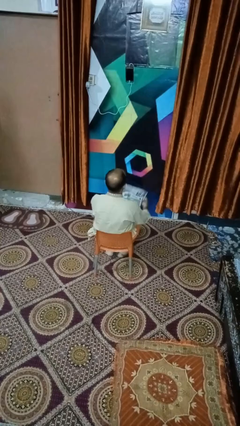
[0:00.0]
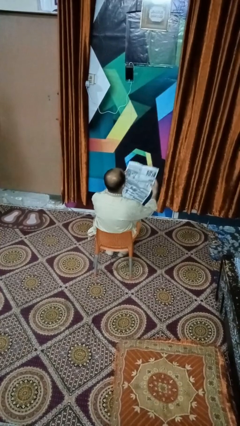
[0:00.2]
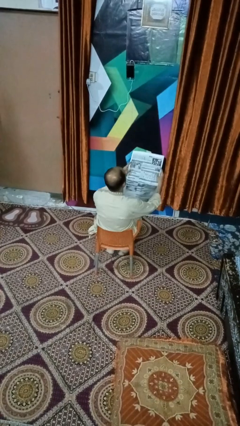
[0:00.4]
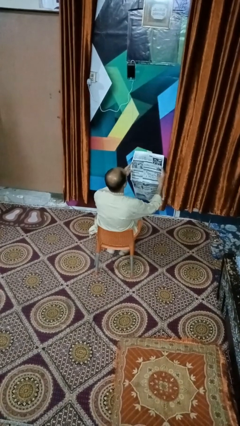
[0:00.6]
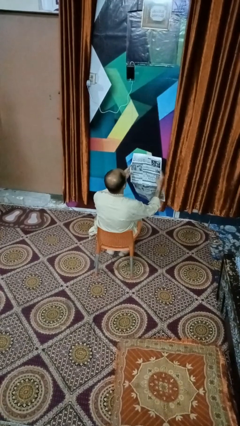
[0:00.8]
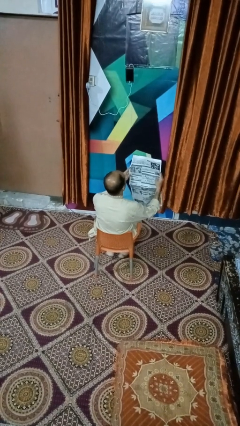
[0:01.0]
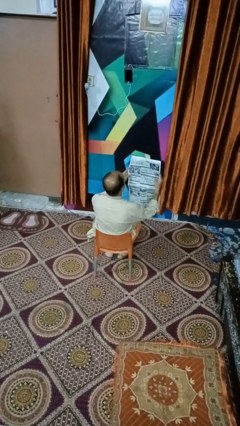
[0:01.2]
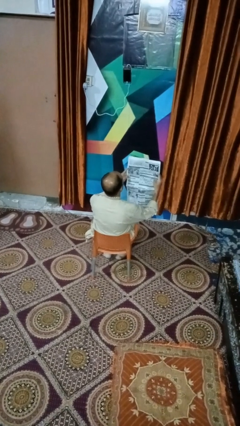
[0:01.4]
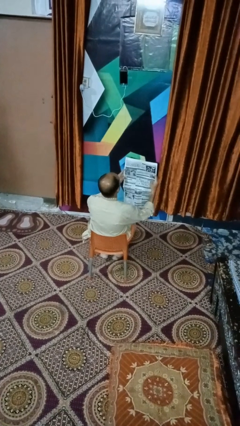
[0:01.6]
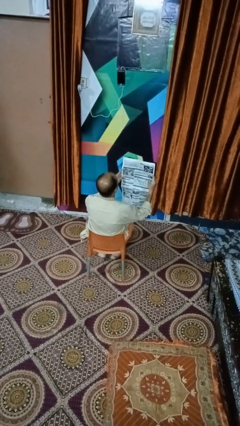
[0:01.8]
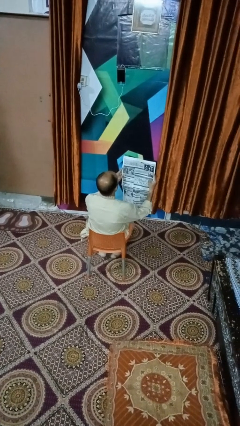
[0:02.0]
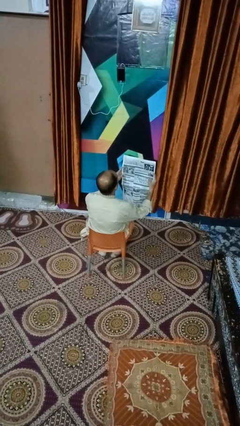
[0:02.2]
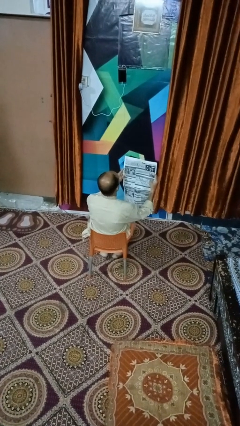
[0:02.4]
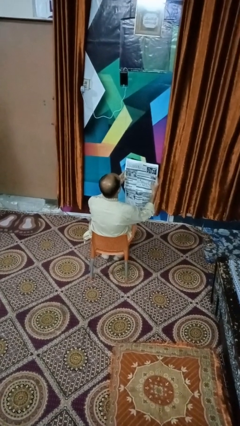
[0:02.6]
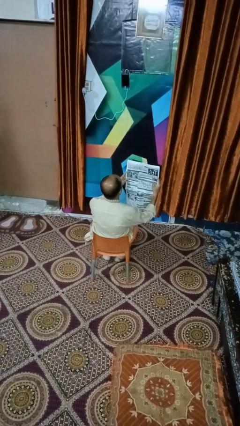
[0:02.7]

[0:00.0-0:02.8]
person reads newspaper

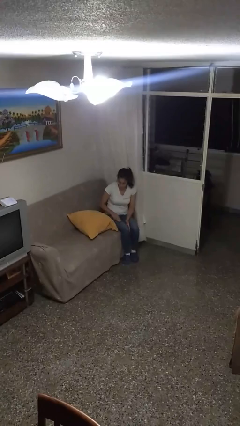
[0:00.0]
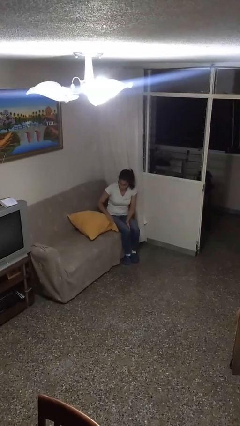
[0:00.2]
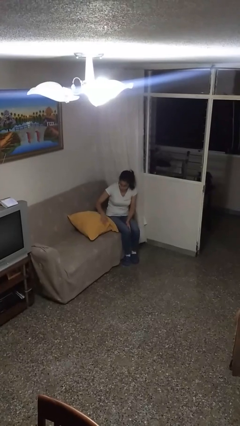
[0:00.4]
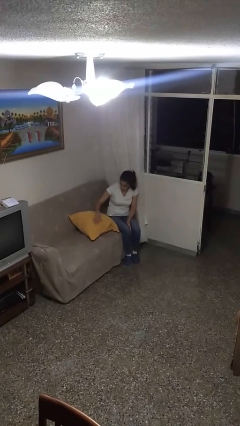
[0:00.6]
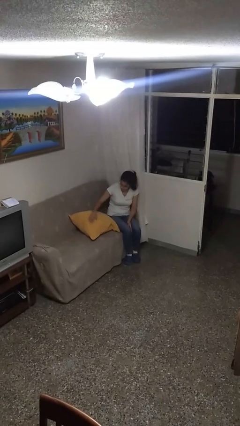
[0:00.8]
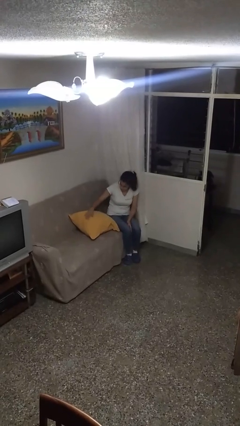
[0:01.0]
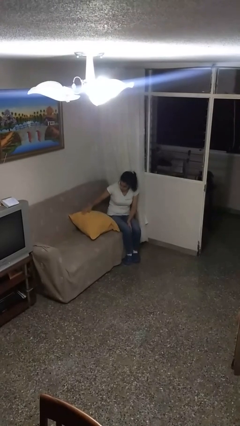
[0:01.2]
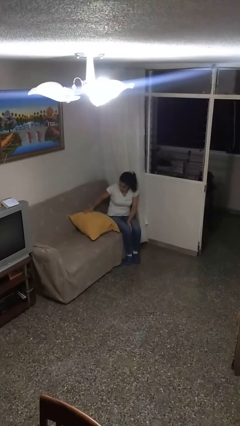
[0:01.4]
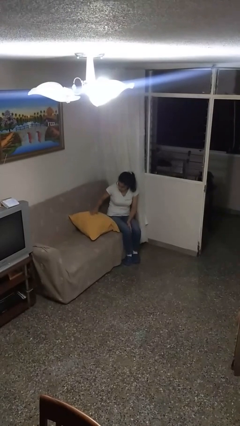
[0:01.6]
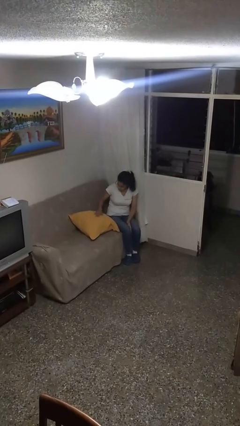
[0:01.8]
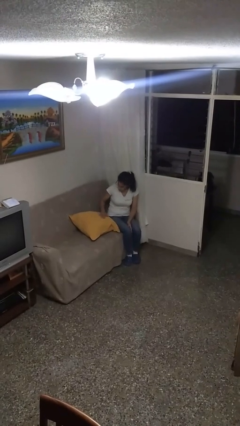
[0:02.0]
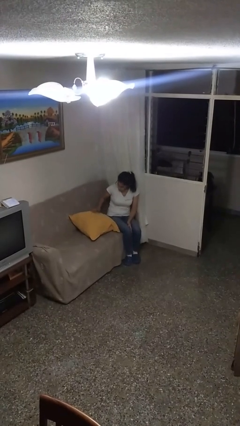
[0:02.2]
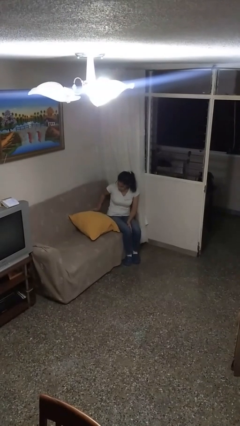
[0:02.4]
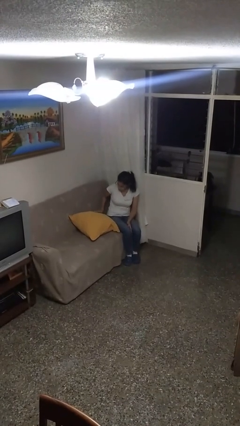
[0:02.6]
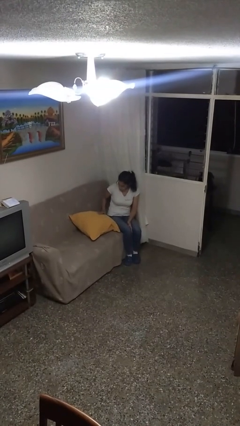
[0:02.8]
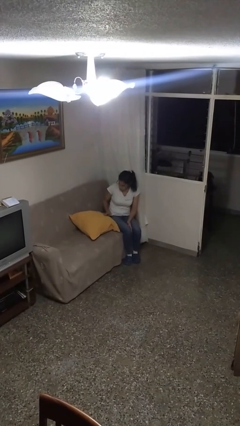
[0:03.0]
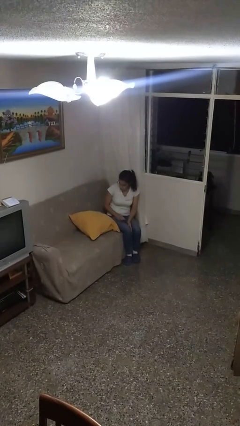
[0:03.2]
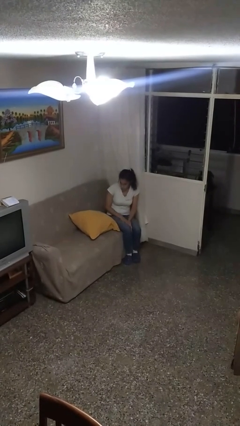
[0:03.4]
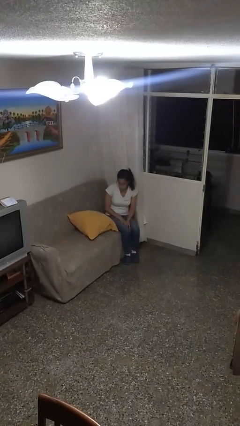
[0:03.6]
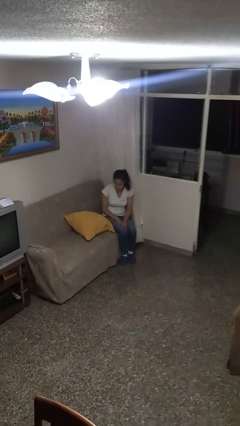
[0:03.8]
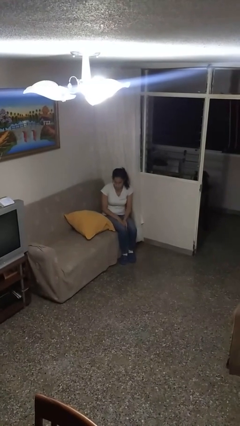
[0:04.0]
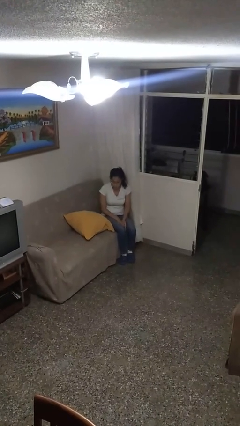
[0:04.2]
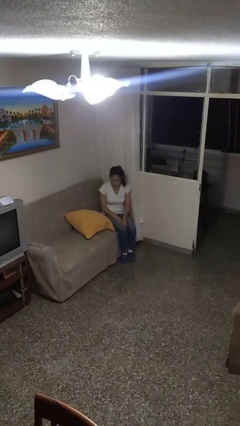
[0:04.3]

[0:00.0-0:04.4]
person waves hand over object

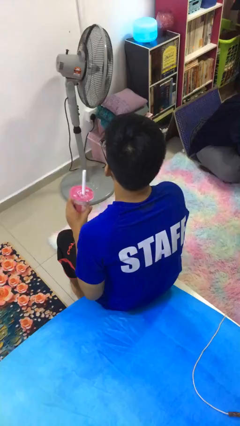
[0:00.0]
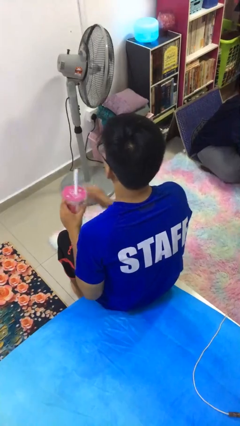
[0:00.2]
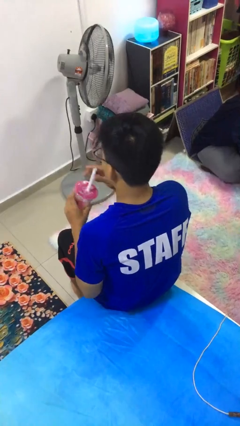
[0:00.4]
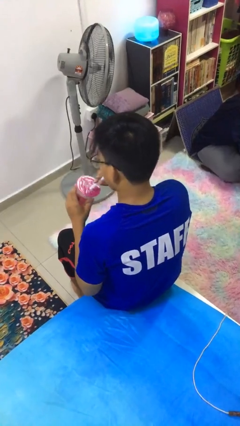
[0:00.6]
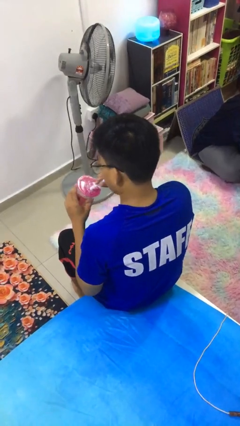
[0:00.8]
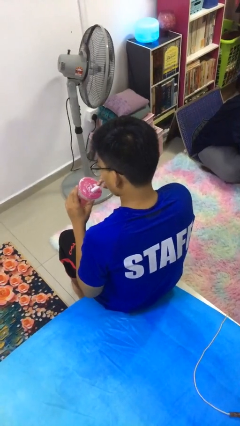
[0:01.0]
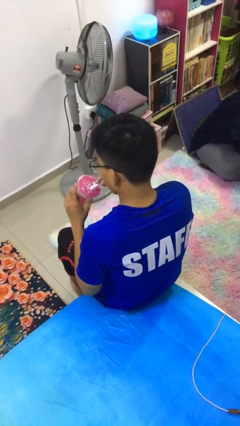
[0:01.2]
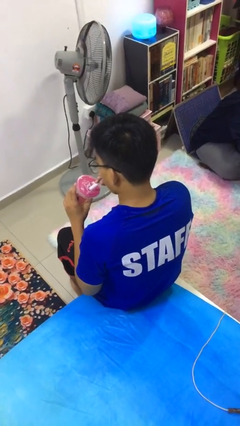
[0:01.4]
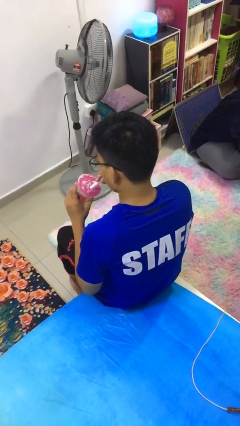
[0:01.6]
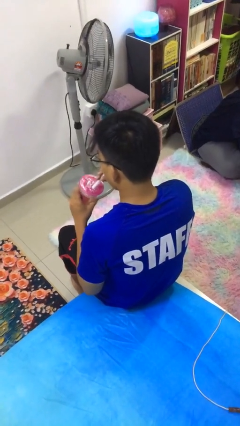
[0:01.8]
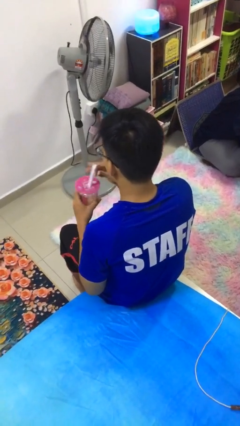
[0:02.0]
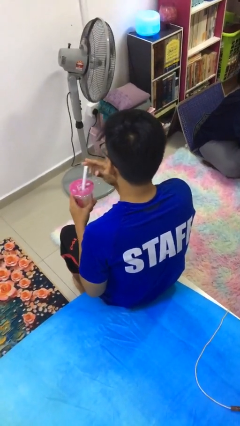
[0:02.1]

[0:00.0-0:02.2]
person drinks from straw

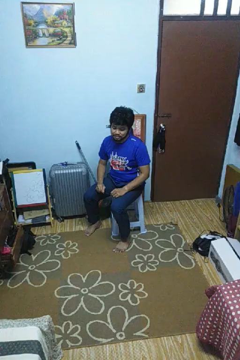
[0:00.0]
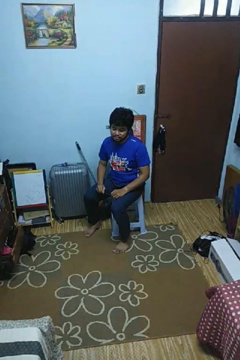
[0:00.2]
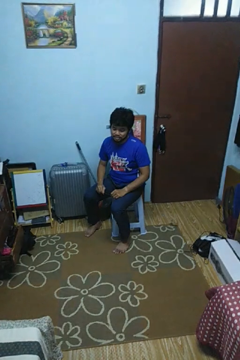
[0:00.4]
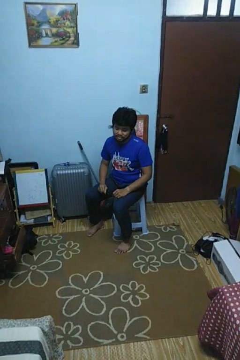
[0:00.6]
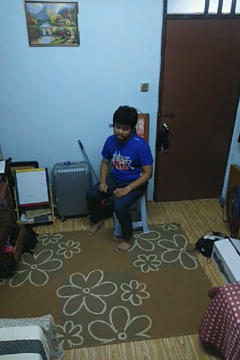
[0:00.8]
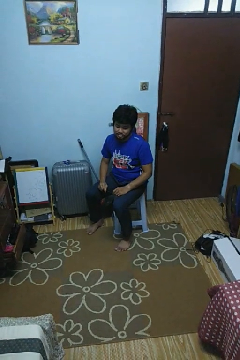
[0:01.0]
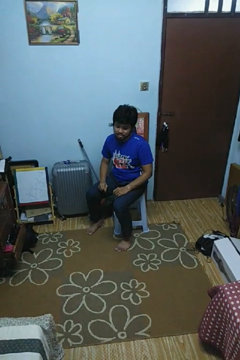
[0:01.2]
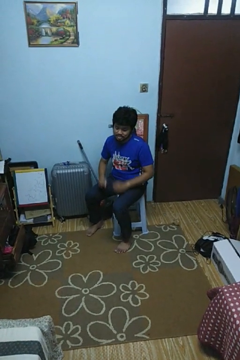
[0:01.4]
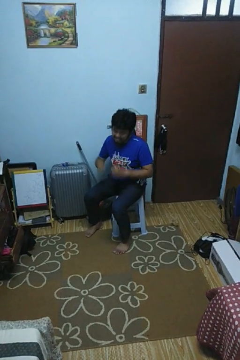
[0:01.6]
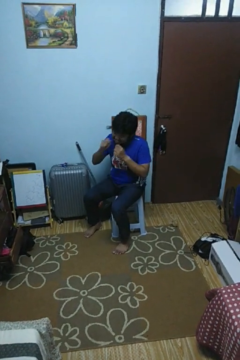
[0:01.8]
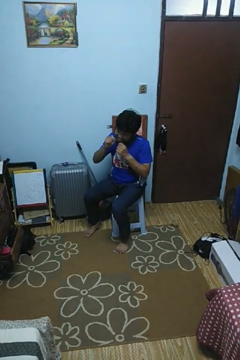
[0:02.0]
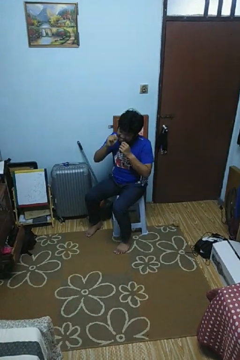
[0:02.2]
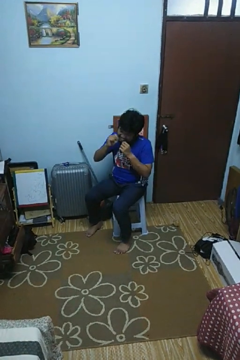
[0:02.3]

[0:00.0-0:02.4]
person flosses

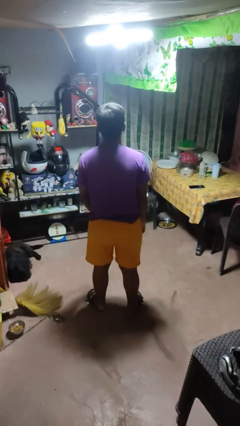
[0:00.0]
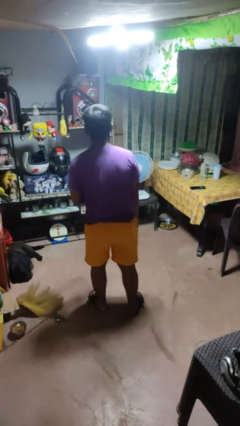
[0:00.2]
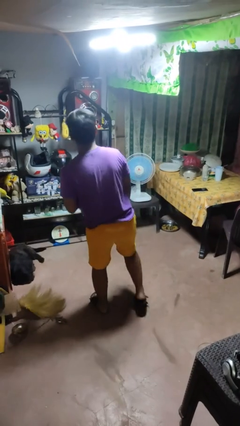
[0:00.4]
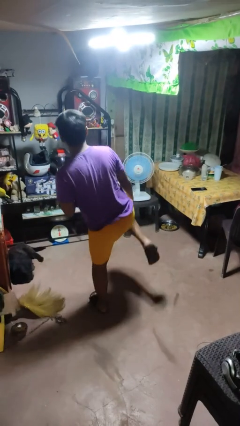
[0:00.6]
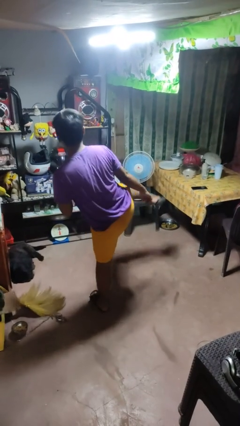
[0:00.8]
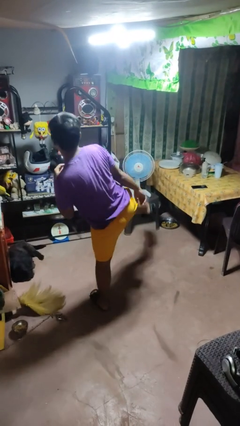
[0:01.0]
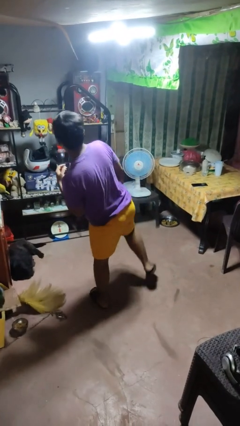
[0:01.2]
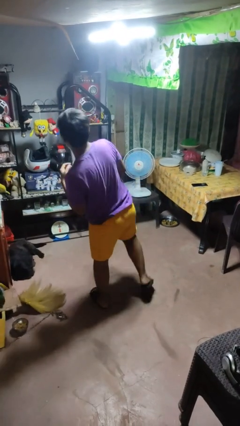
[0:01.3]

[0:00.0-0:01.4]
person karate kicks

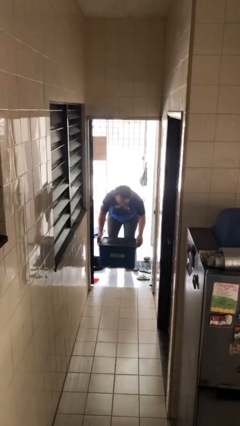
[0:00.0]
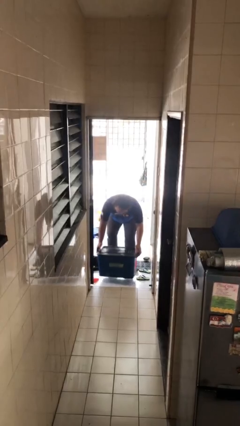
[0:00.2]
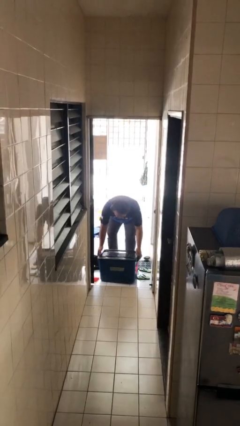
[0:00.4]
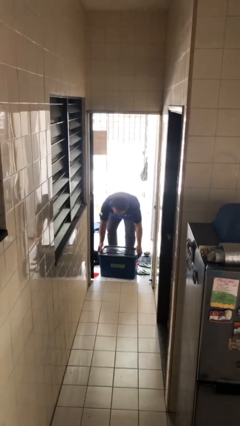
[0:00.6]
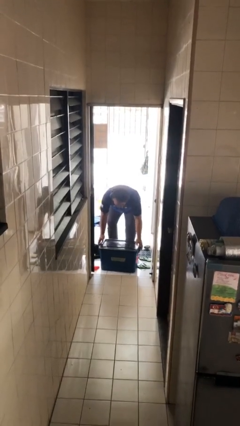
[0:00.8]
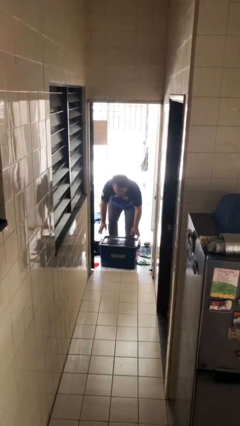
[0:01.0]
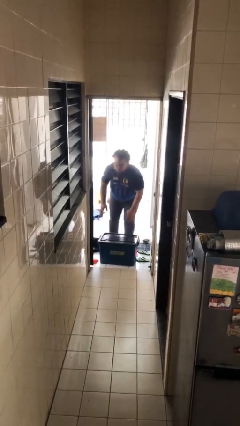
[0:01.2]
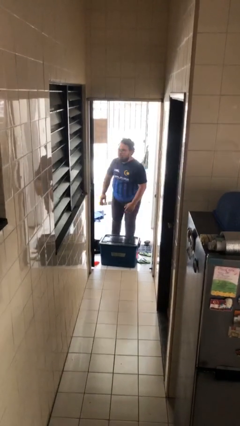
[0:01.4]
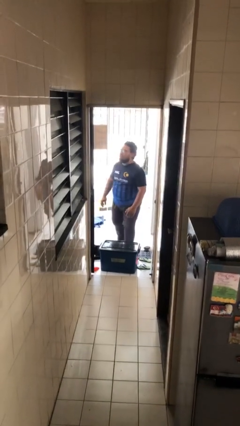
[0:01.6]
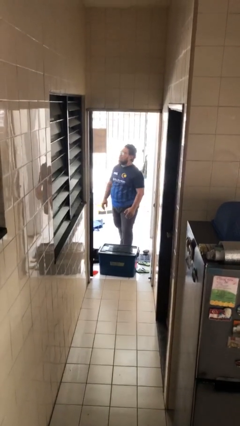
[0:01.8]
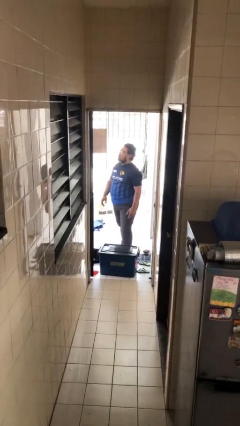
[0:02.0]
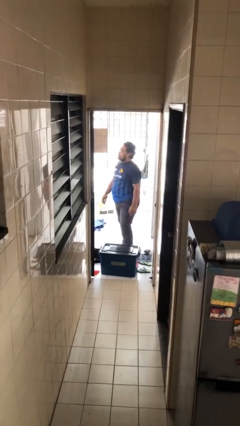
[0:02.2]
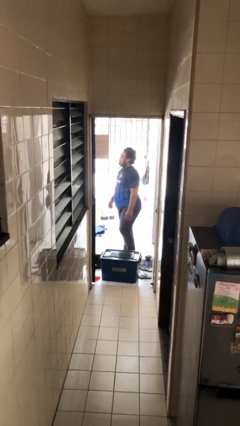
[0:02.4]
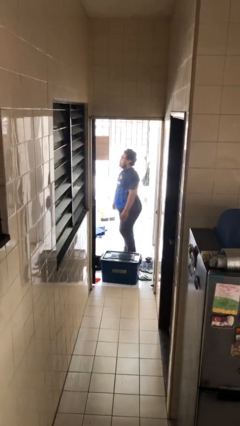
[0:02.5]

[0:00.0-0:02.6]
person puts down object on floor

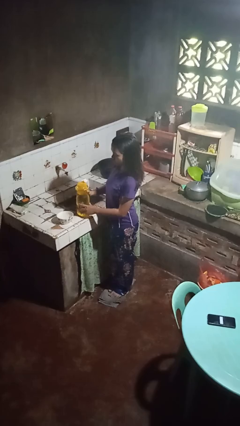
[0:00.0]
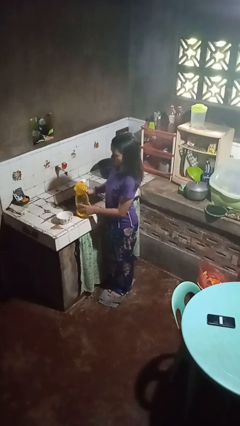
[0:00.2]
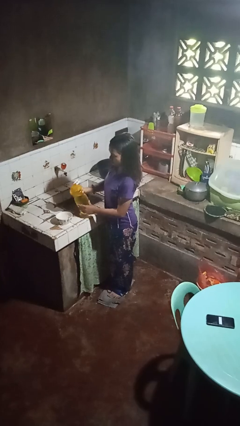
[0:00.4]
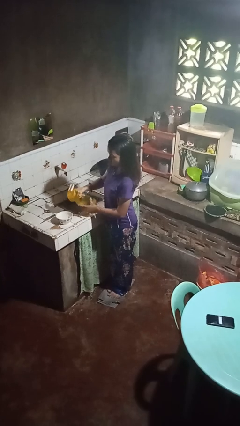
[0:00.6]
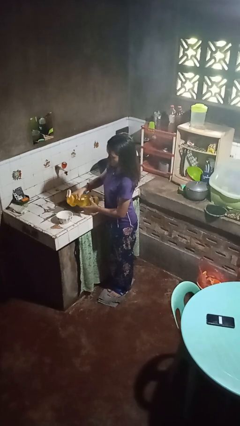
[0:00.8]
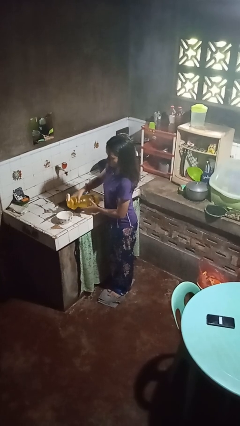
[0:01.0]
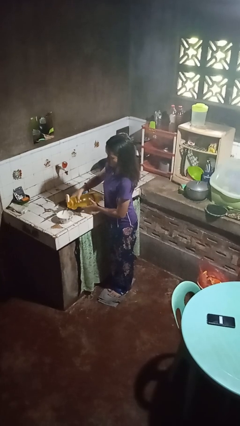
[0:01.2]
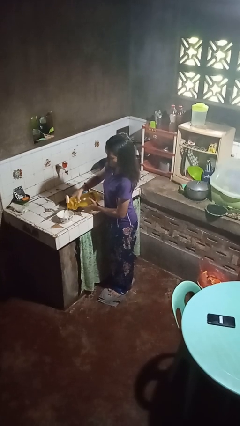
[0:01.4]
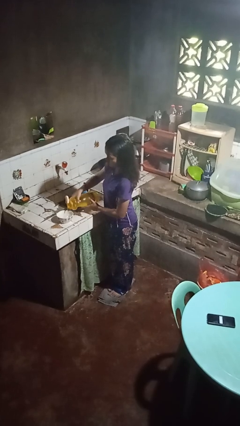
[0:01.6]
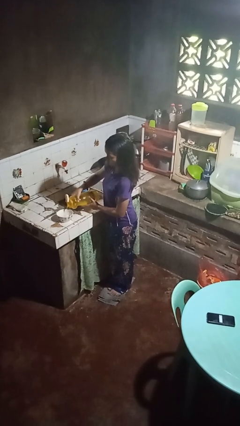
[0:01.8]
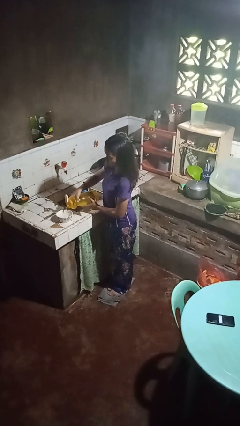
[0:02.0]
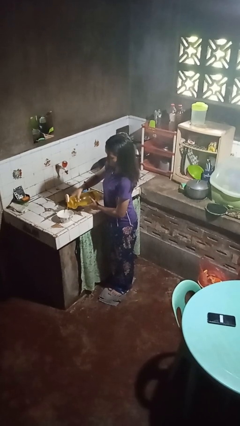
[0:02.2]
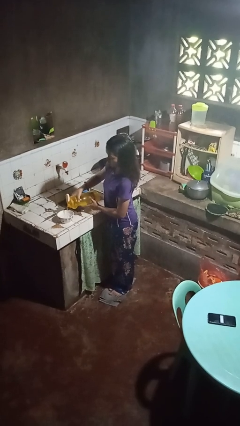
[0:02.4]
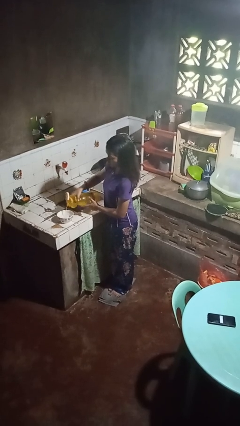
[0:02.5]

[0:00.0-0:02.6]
person pours into bowl
